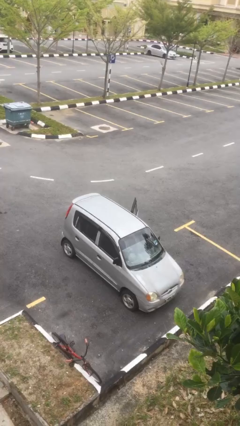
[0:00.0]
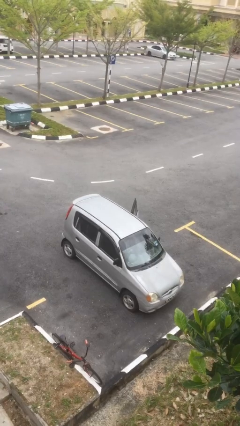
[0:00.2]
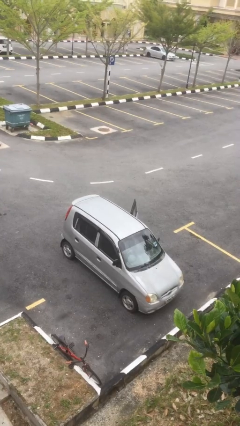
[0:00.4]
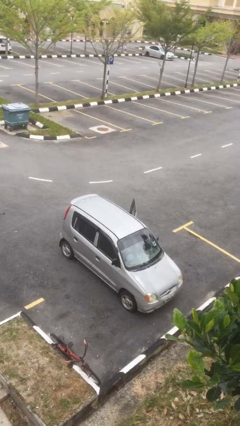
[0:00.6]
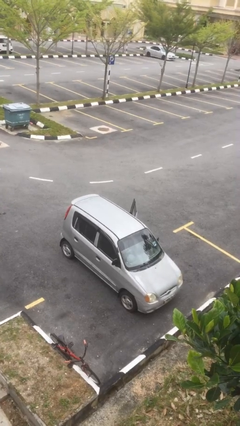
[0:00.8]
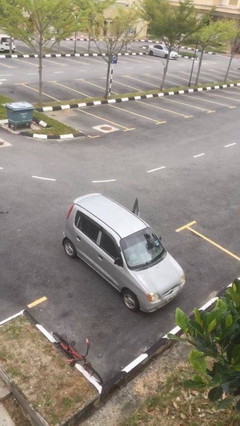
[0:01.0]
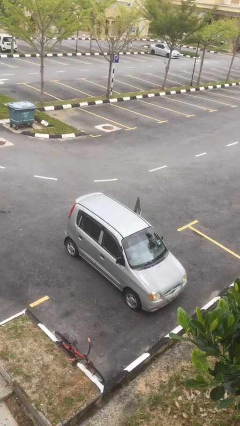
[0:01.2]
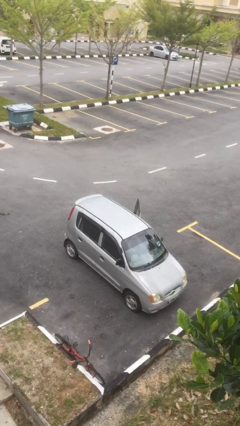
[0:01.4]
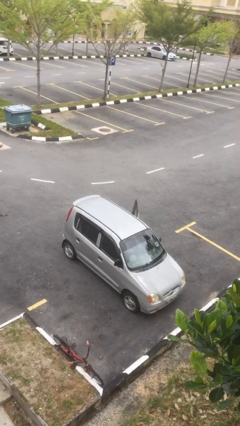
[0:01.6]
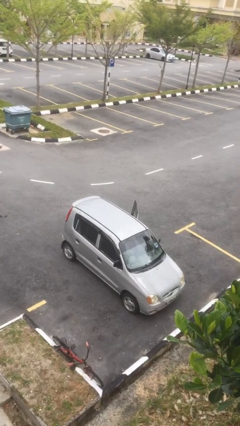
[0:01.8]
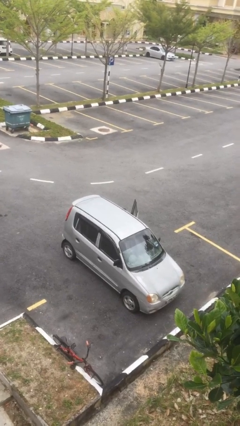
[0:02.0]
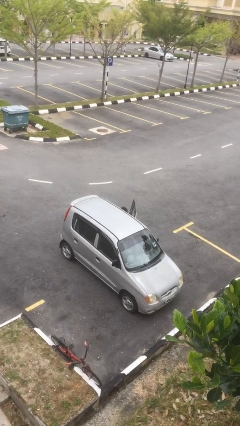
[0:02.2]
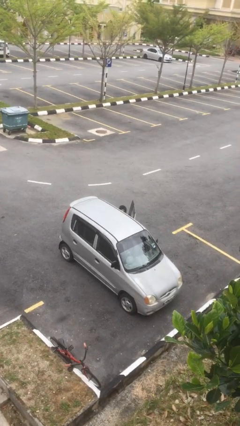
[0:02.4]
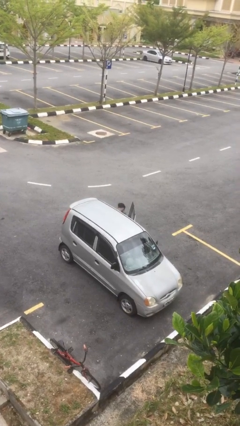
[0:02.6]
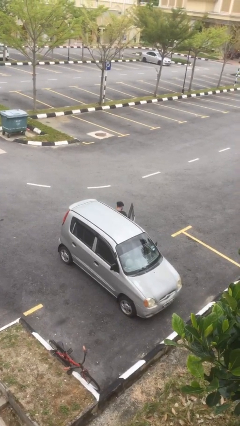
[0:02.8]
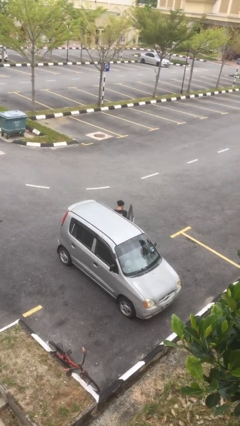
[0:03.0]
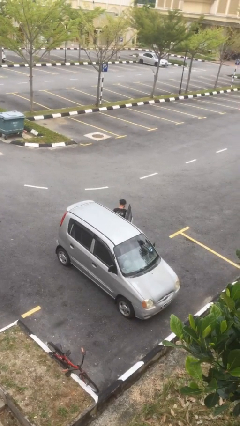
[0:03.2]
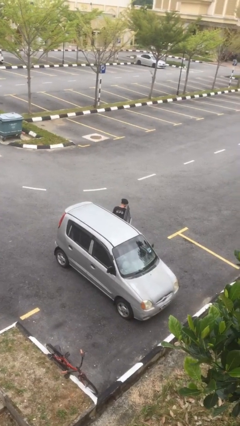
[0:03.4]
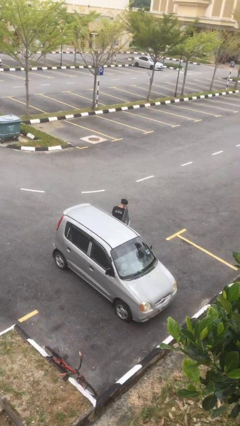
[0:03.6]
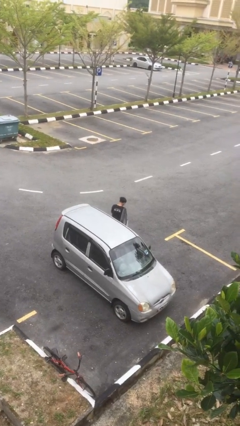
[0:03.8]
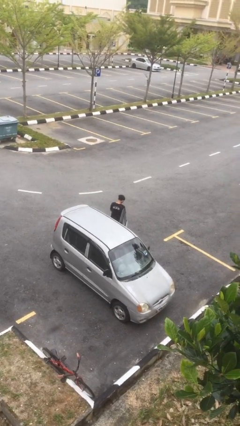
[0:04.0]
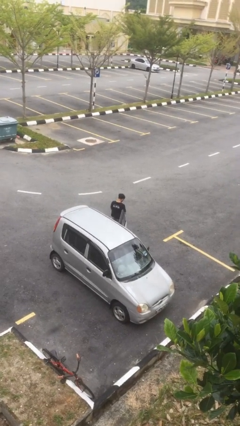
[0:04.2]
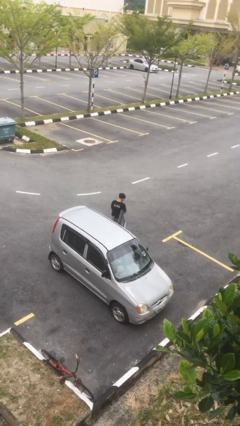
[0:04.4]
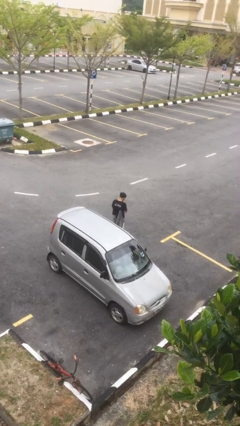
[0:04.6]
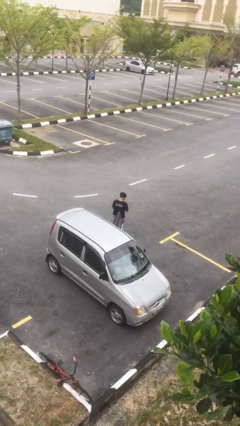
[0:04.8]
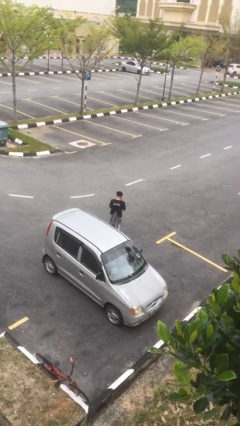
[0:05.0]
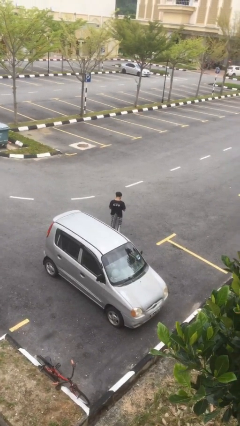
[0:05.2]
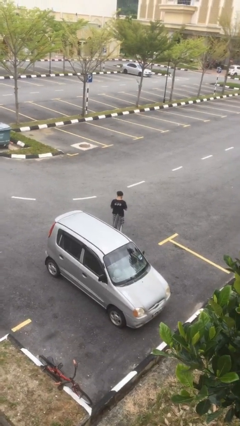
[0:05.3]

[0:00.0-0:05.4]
person exits car
